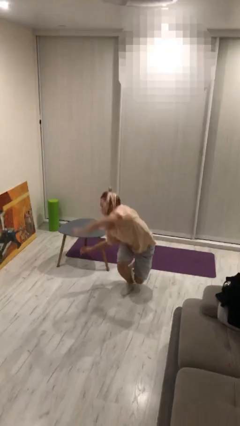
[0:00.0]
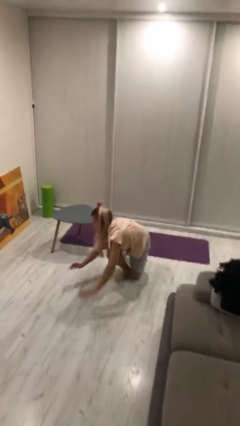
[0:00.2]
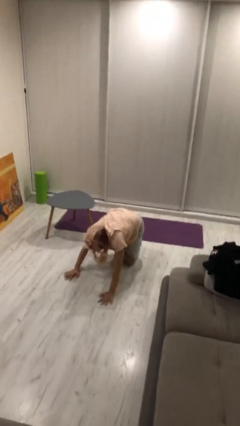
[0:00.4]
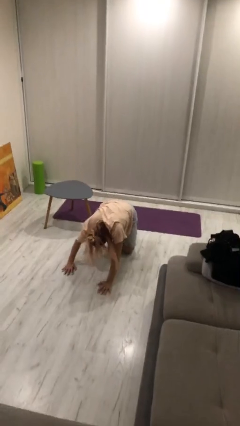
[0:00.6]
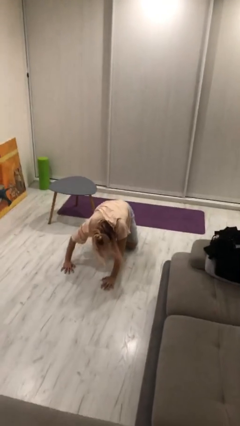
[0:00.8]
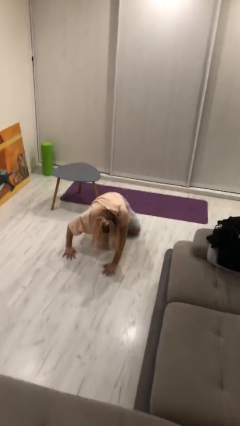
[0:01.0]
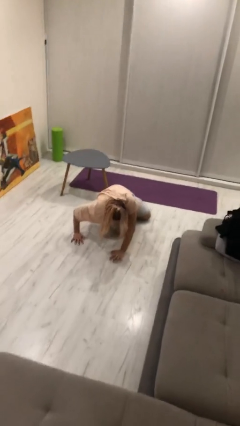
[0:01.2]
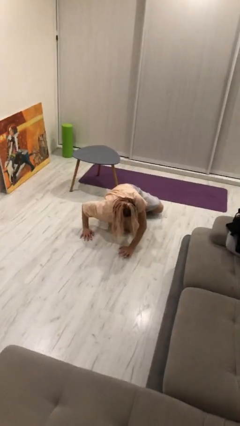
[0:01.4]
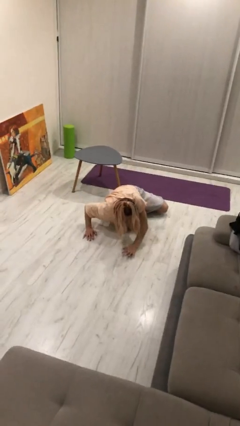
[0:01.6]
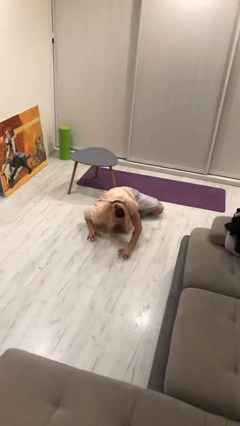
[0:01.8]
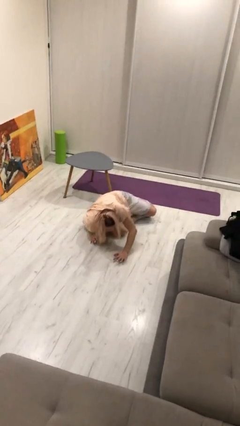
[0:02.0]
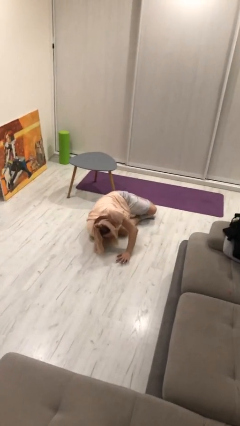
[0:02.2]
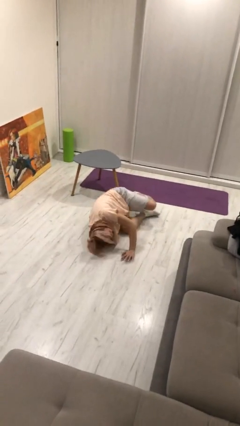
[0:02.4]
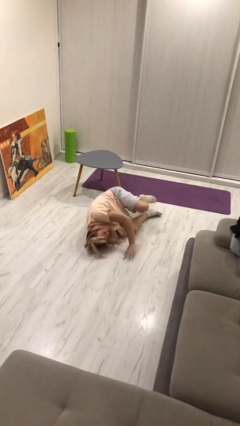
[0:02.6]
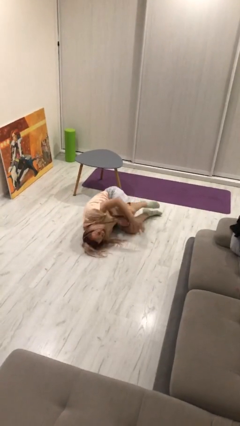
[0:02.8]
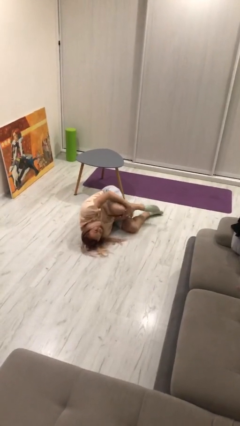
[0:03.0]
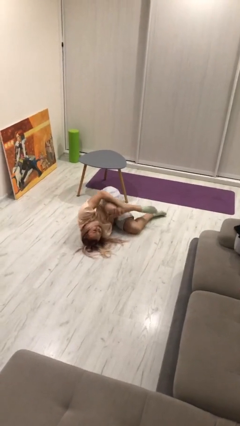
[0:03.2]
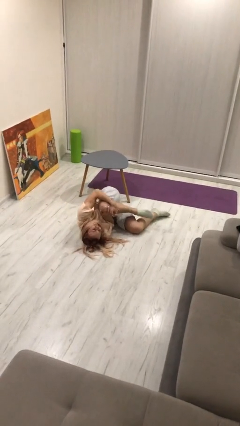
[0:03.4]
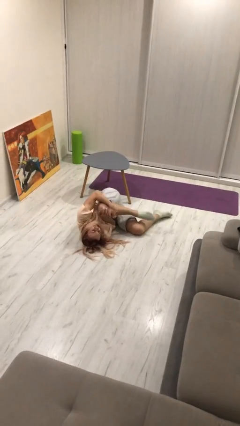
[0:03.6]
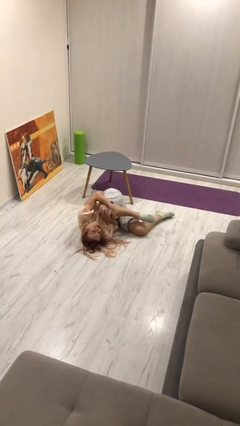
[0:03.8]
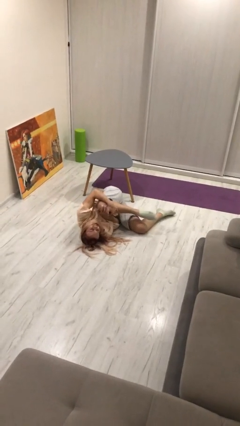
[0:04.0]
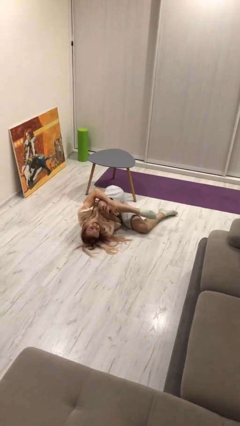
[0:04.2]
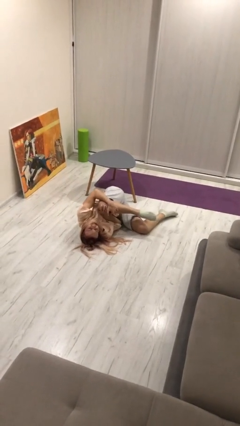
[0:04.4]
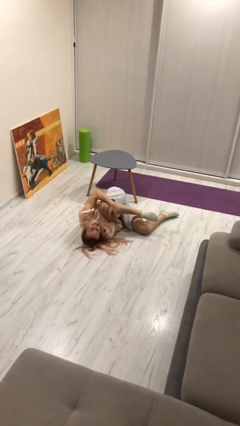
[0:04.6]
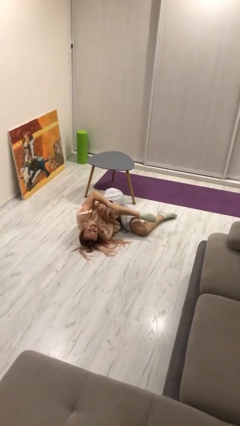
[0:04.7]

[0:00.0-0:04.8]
person lies down on floor

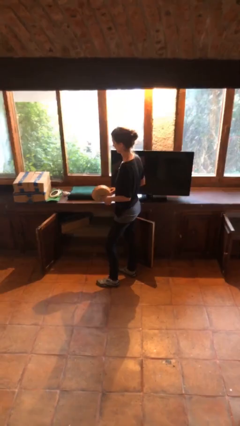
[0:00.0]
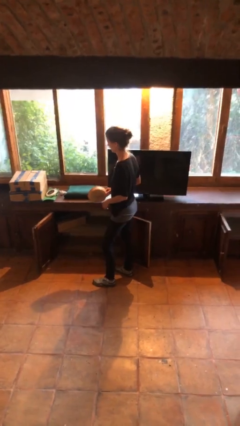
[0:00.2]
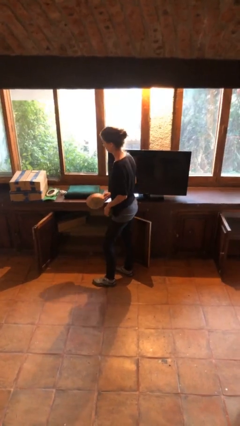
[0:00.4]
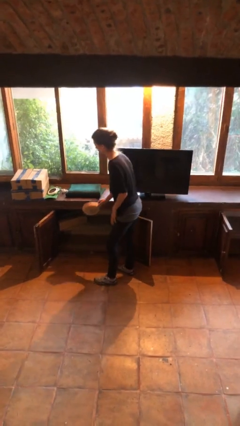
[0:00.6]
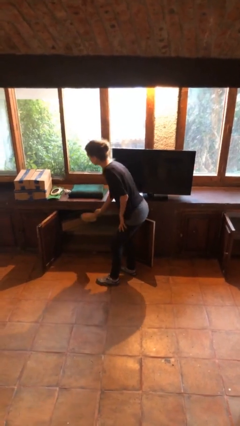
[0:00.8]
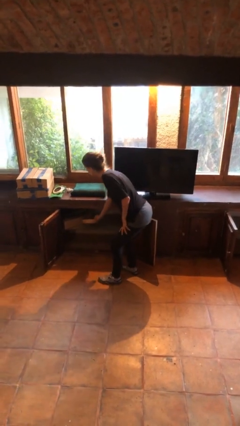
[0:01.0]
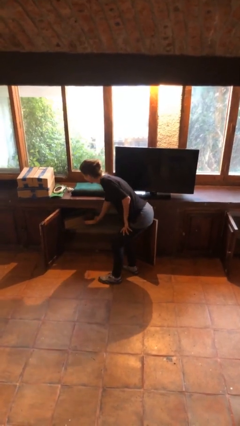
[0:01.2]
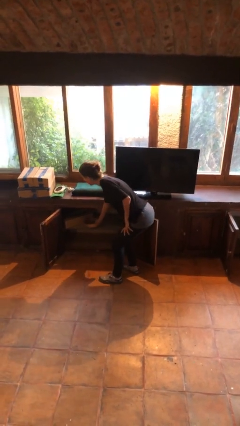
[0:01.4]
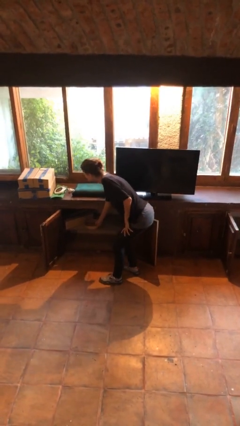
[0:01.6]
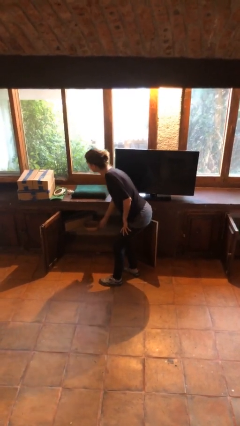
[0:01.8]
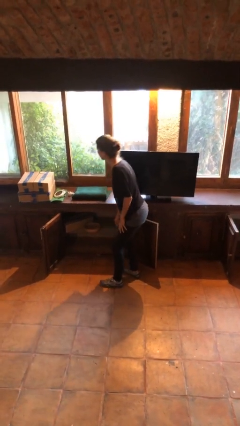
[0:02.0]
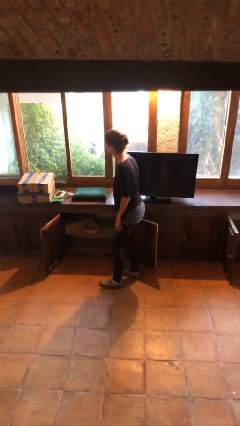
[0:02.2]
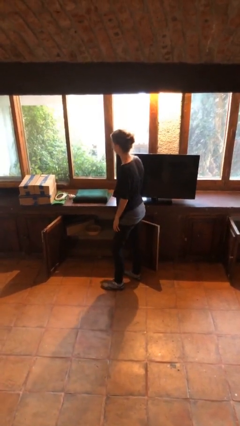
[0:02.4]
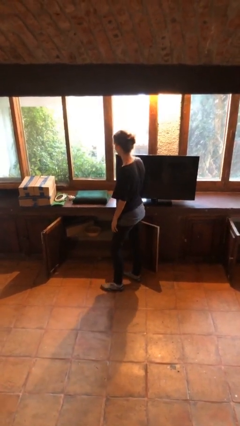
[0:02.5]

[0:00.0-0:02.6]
person puts down object into cabinet

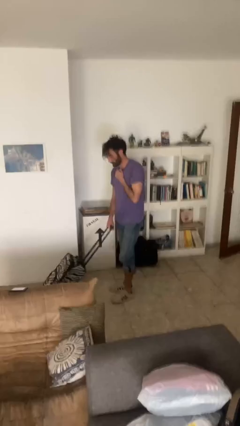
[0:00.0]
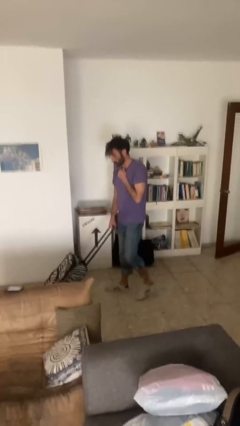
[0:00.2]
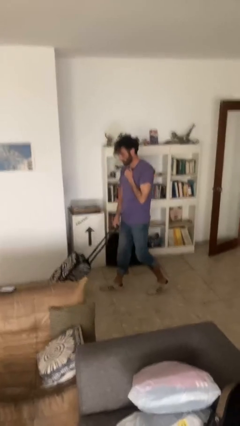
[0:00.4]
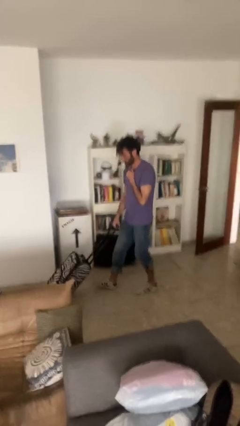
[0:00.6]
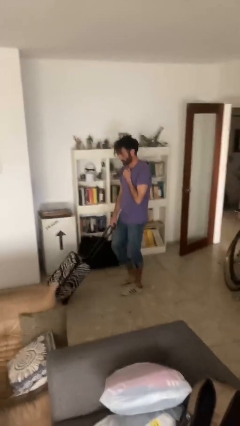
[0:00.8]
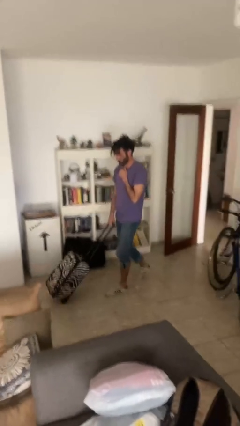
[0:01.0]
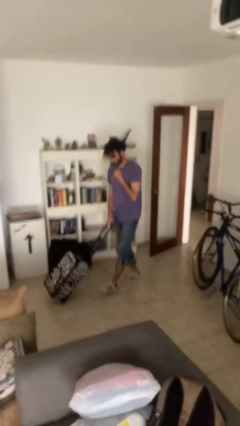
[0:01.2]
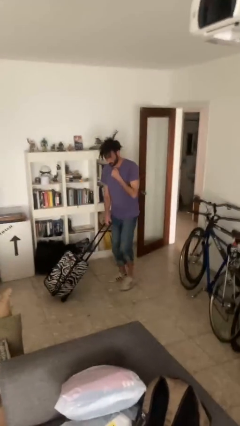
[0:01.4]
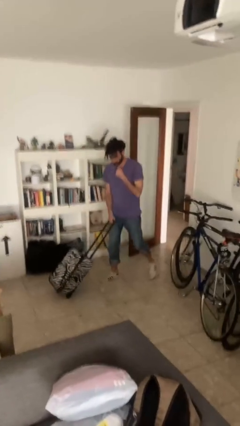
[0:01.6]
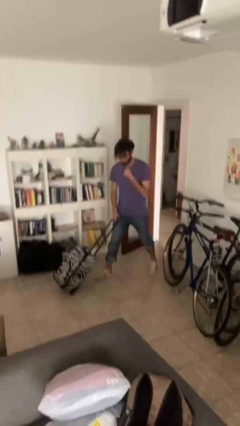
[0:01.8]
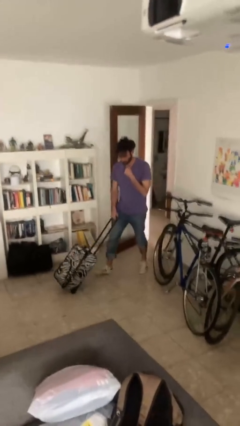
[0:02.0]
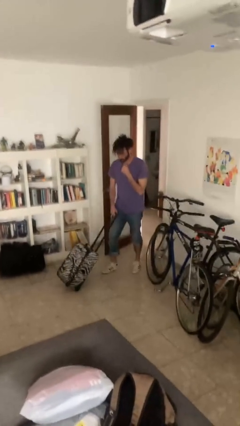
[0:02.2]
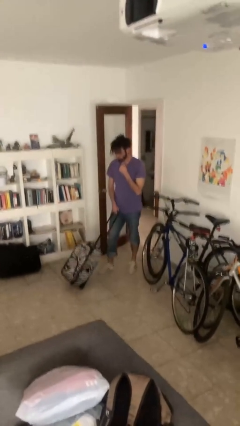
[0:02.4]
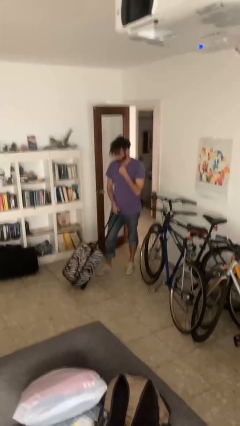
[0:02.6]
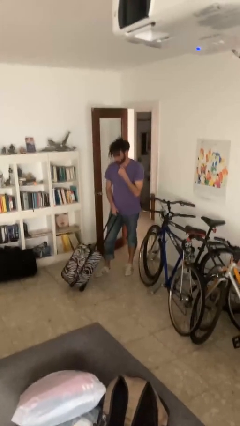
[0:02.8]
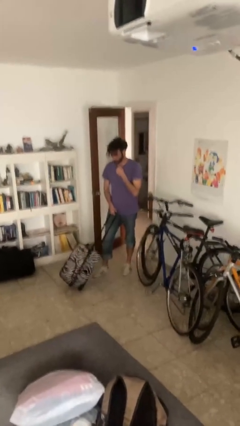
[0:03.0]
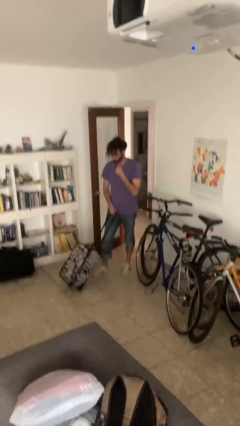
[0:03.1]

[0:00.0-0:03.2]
person pulls wheeled cart

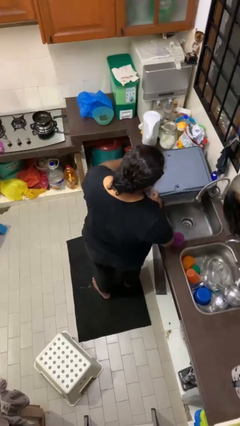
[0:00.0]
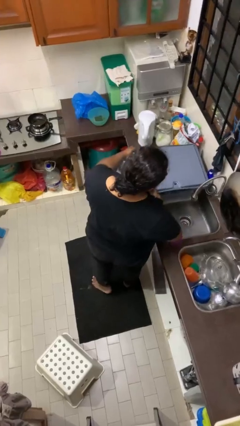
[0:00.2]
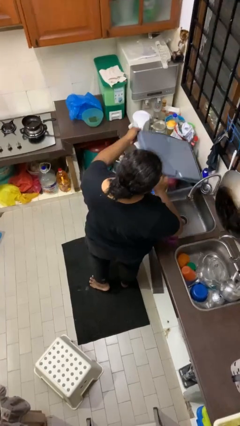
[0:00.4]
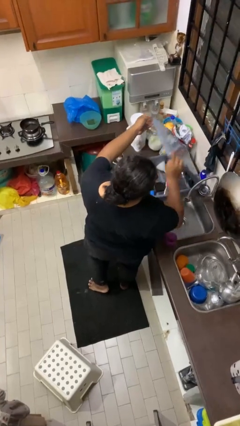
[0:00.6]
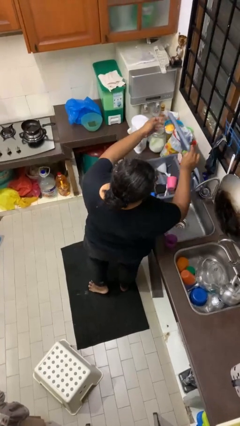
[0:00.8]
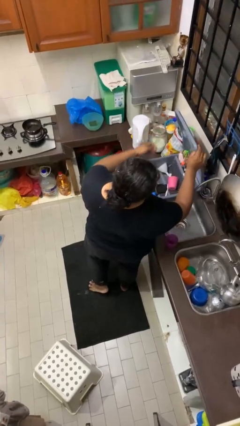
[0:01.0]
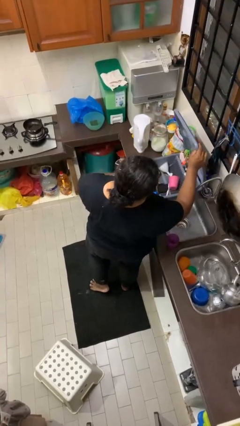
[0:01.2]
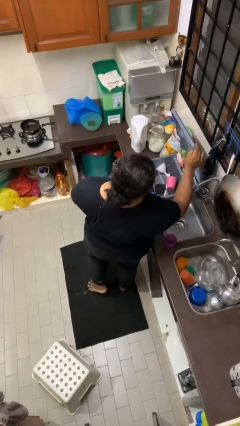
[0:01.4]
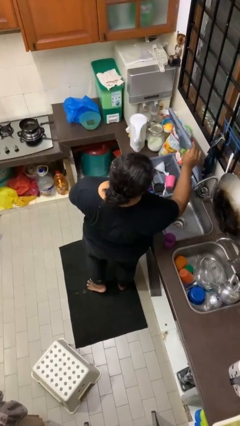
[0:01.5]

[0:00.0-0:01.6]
person opens dishwasher

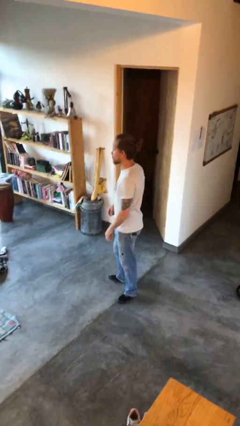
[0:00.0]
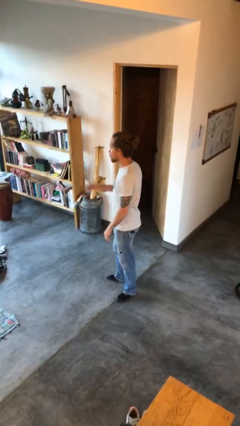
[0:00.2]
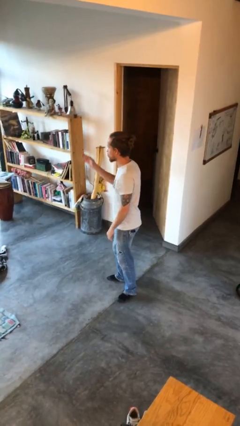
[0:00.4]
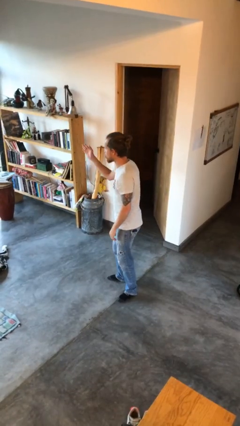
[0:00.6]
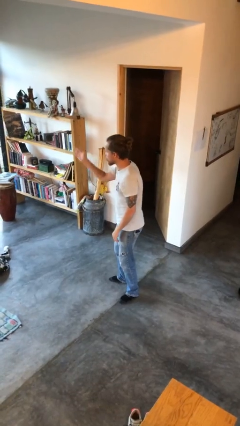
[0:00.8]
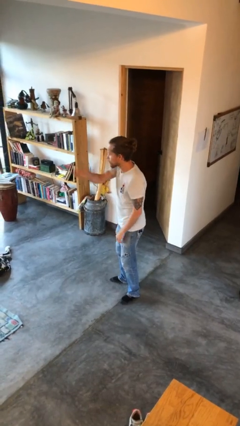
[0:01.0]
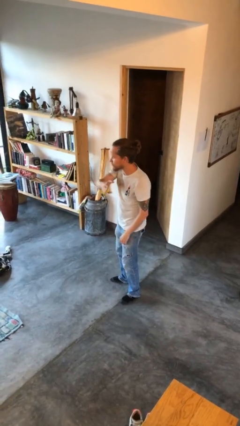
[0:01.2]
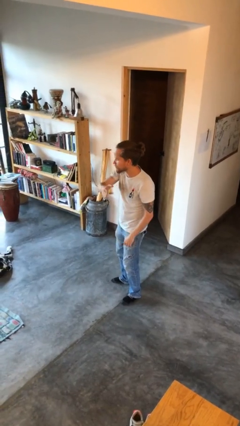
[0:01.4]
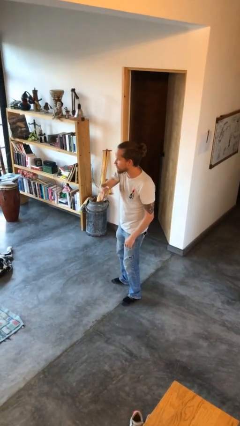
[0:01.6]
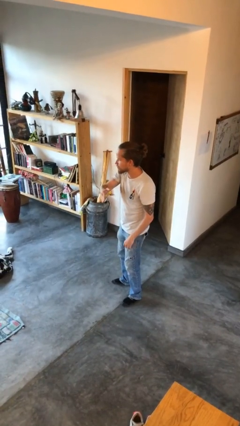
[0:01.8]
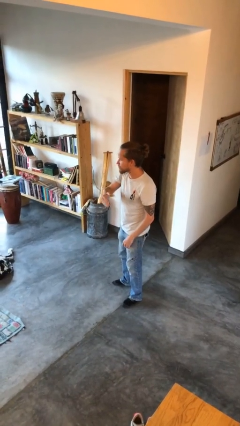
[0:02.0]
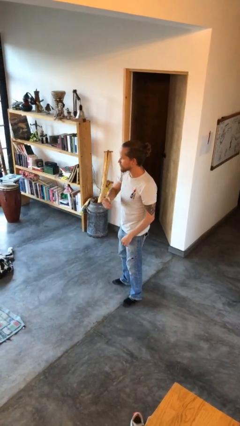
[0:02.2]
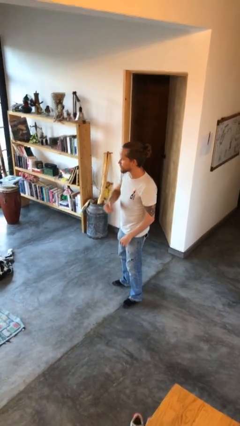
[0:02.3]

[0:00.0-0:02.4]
person gestures swipe left

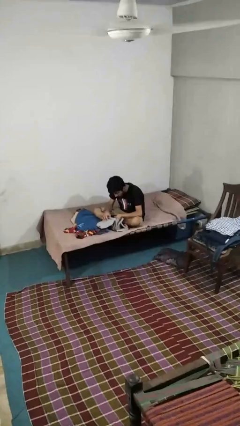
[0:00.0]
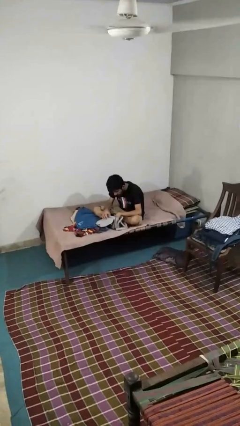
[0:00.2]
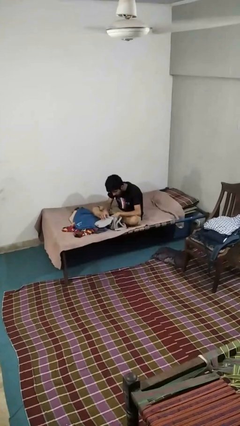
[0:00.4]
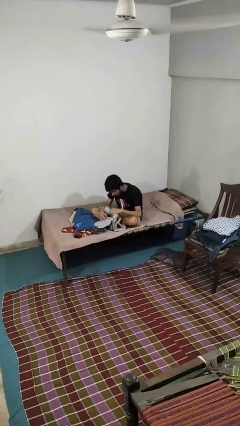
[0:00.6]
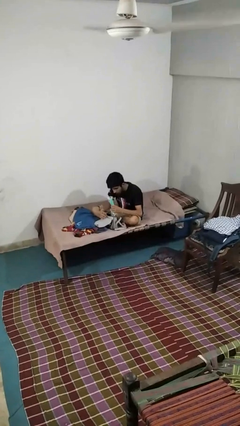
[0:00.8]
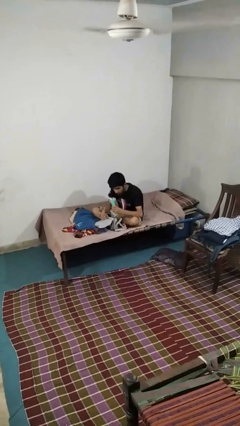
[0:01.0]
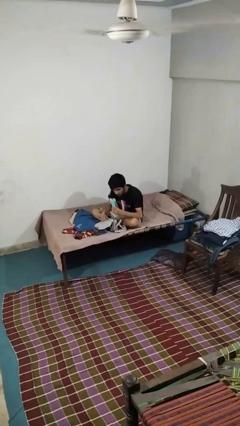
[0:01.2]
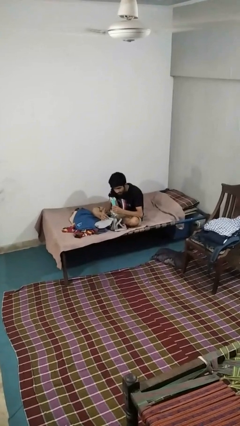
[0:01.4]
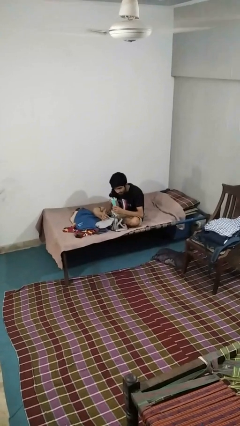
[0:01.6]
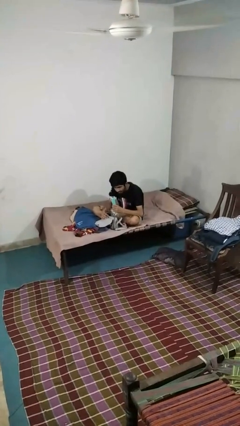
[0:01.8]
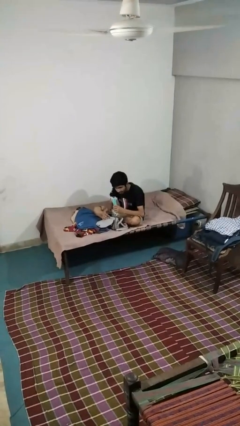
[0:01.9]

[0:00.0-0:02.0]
person takes object from purse

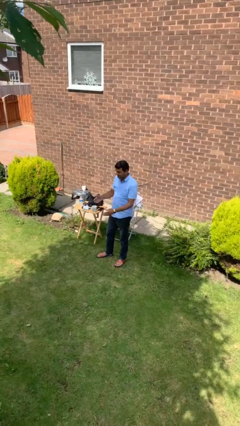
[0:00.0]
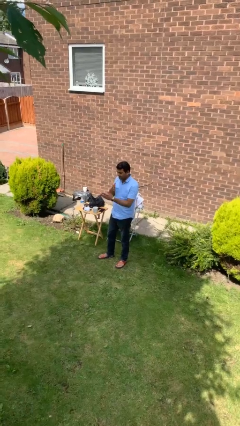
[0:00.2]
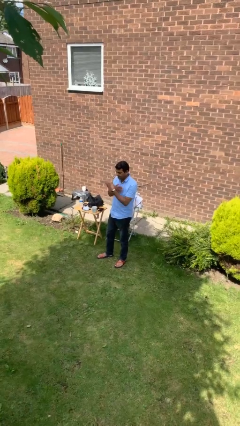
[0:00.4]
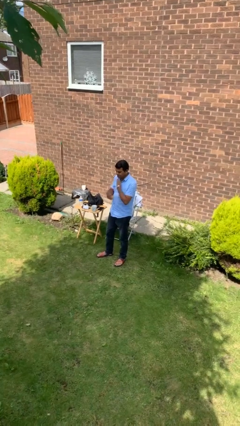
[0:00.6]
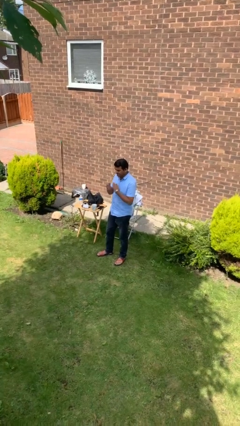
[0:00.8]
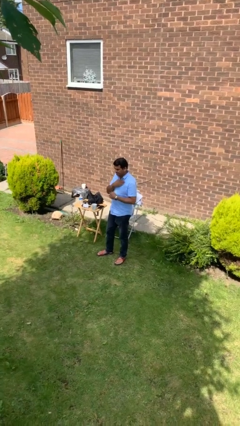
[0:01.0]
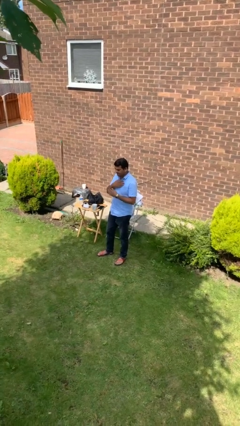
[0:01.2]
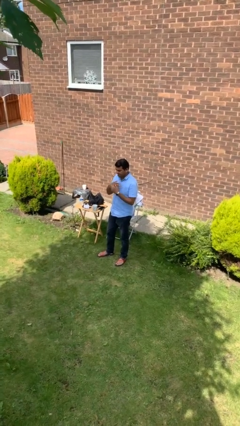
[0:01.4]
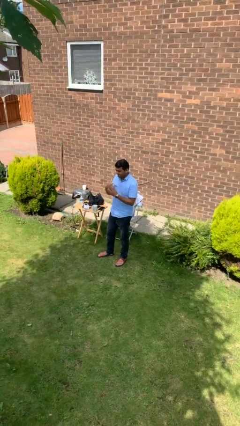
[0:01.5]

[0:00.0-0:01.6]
person drums on chest
